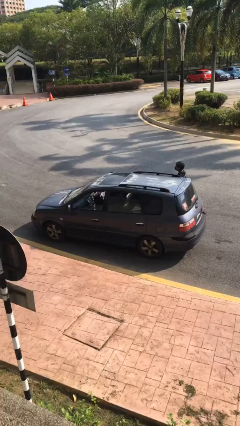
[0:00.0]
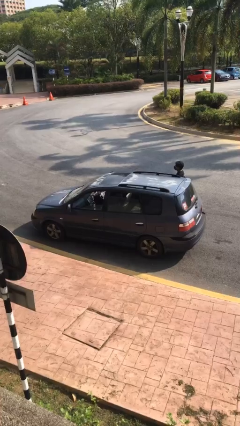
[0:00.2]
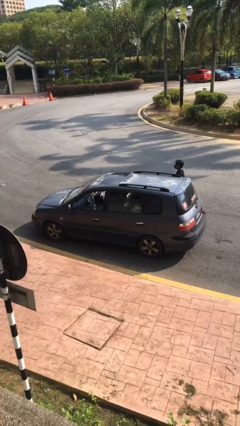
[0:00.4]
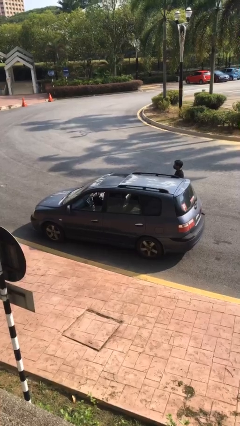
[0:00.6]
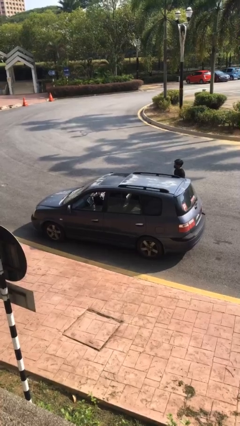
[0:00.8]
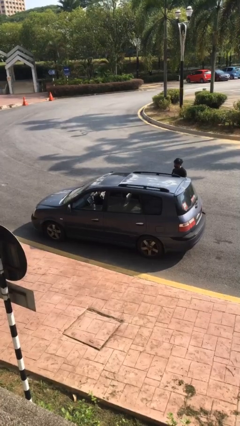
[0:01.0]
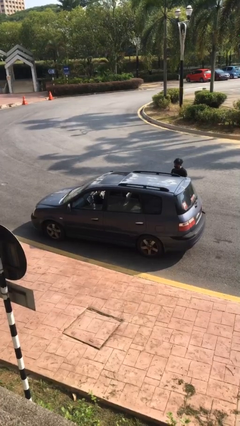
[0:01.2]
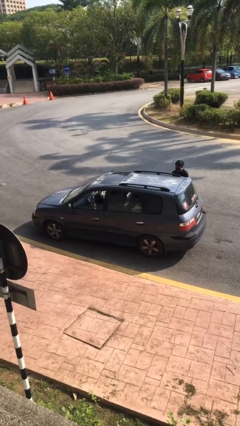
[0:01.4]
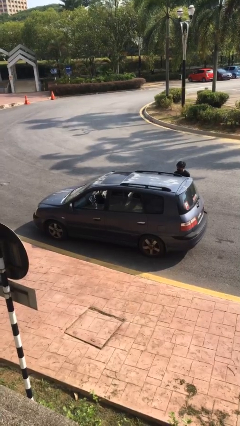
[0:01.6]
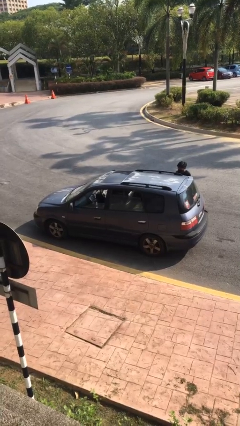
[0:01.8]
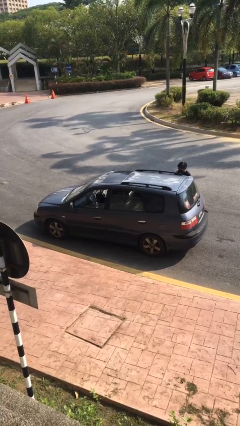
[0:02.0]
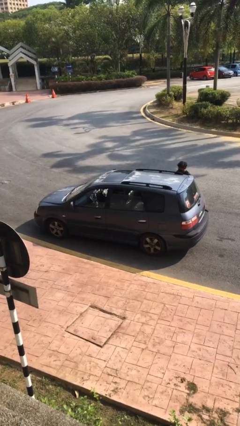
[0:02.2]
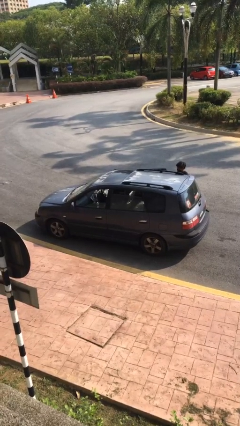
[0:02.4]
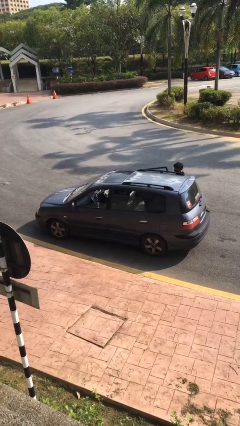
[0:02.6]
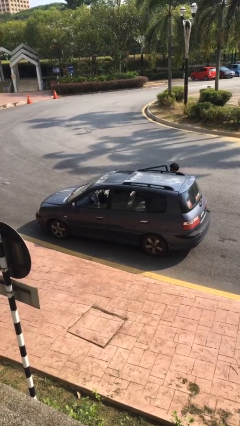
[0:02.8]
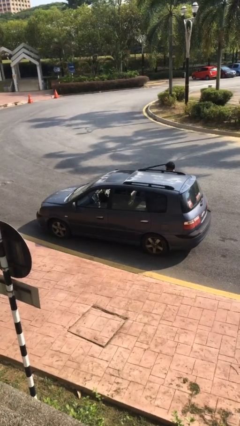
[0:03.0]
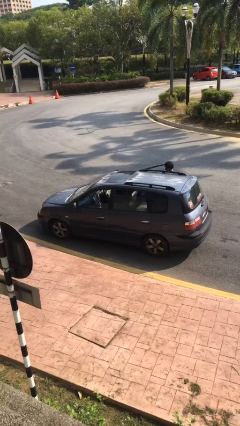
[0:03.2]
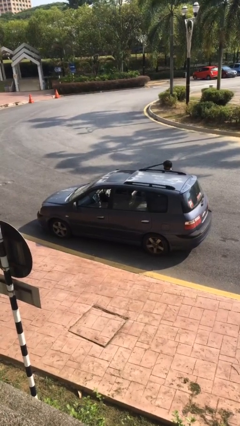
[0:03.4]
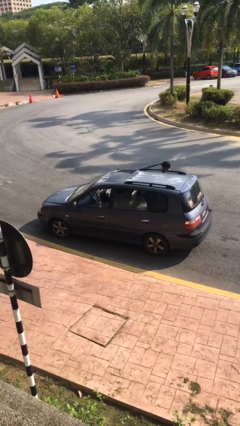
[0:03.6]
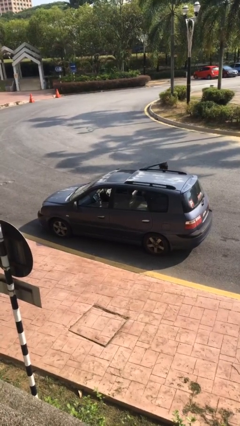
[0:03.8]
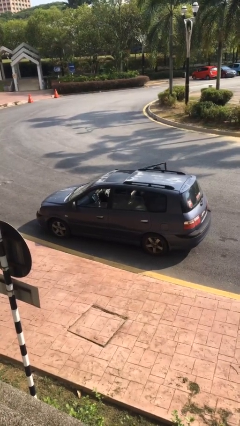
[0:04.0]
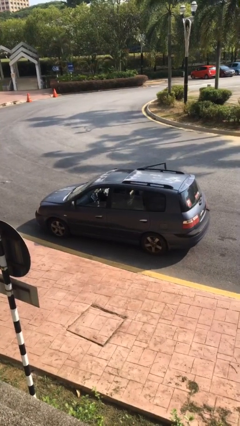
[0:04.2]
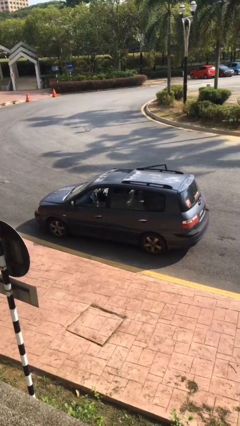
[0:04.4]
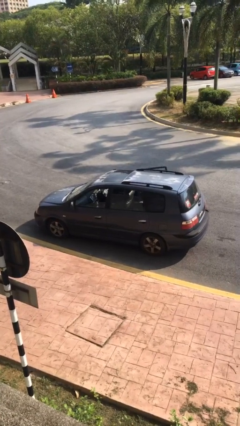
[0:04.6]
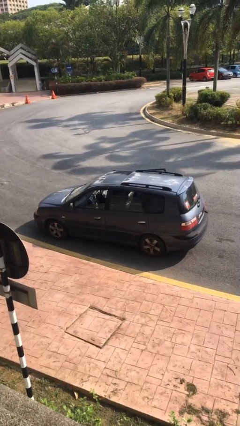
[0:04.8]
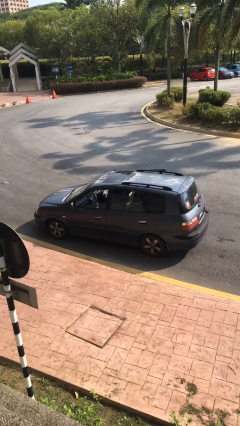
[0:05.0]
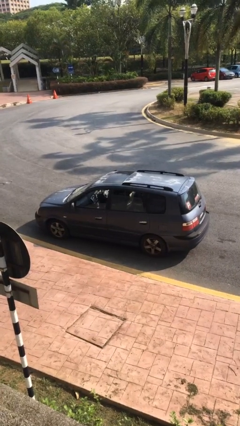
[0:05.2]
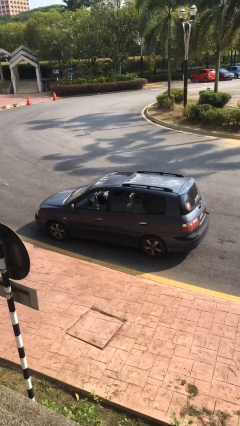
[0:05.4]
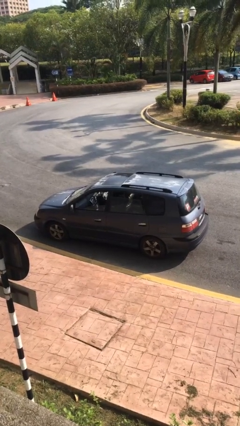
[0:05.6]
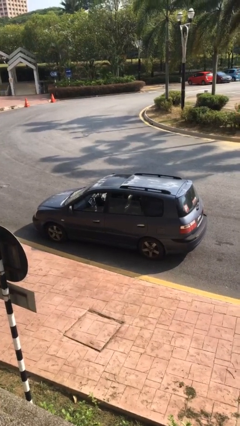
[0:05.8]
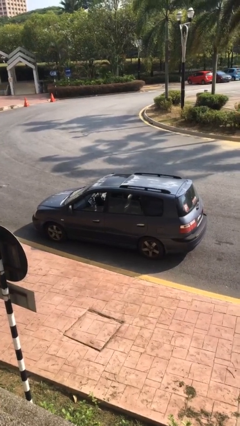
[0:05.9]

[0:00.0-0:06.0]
car picks up person

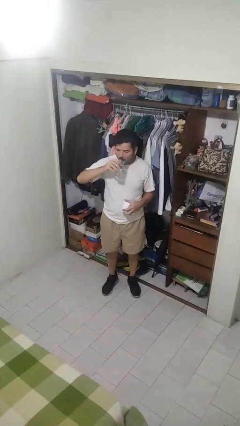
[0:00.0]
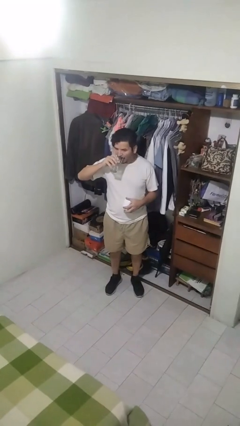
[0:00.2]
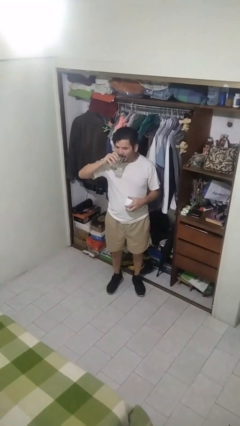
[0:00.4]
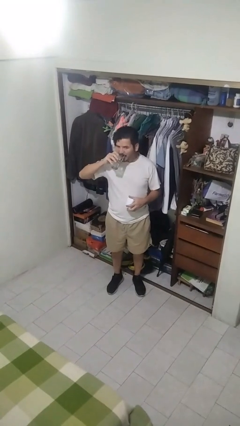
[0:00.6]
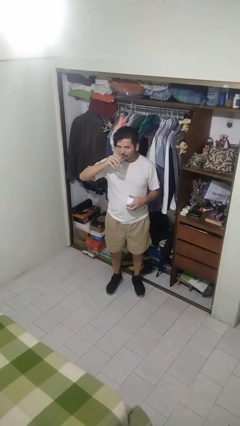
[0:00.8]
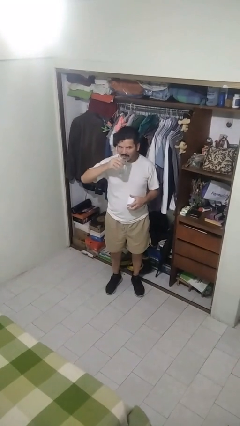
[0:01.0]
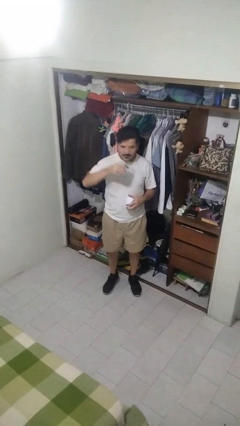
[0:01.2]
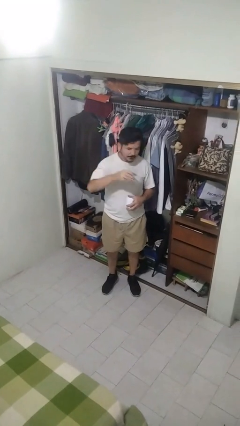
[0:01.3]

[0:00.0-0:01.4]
person drinks from cup

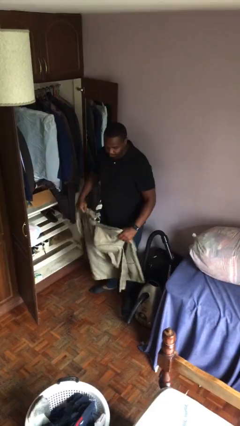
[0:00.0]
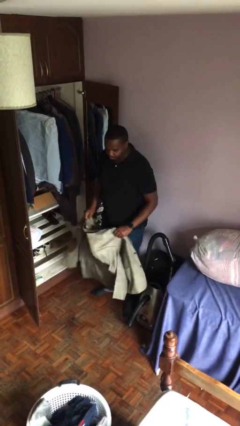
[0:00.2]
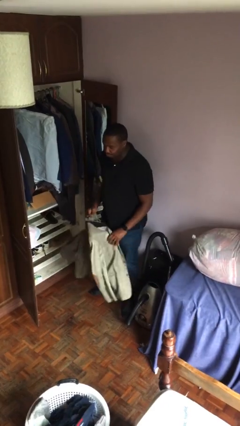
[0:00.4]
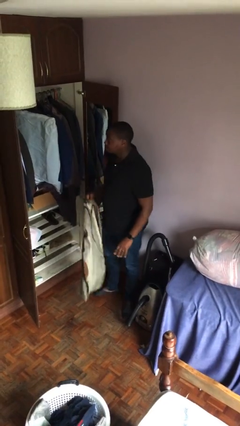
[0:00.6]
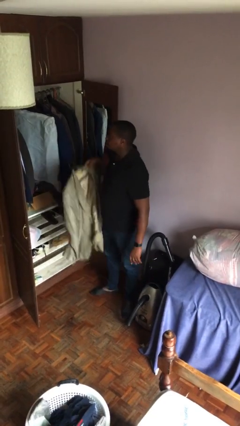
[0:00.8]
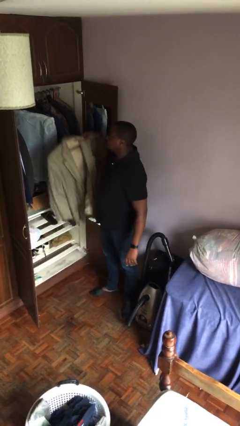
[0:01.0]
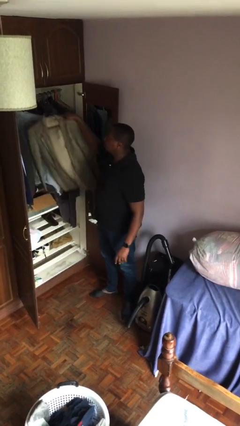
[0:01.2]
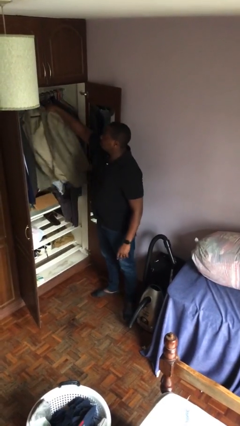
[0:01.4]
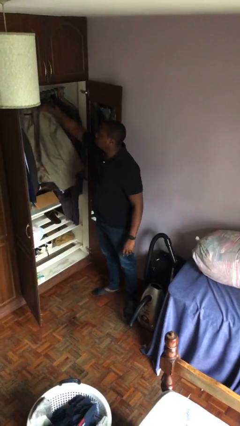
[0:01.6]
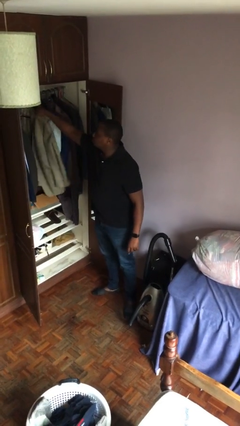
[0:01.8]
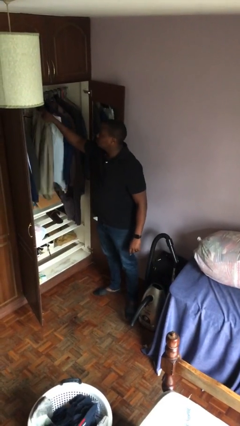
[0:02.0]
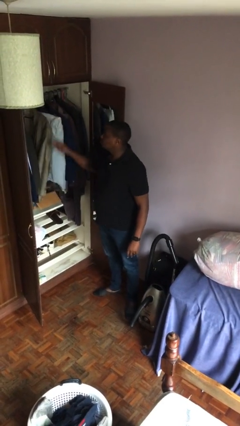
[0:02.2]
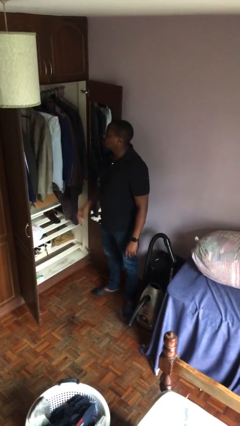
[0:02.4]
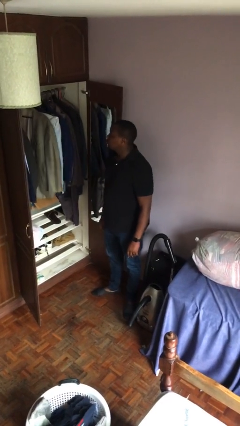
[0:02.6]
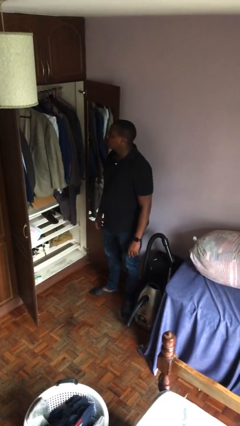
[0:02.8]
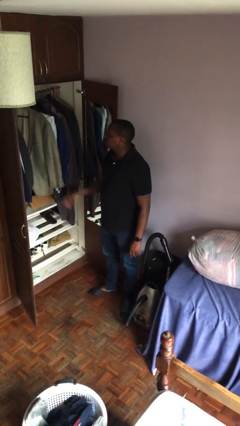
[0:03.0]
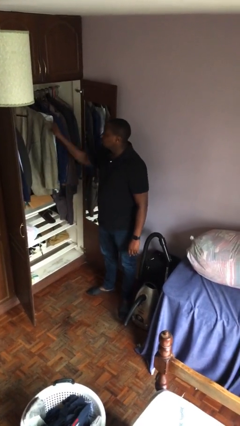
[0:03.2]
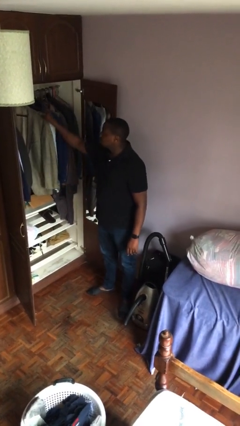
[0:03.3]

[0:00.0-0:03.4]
person puts clothes into closet

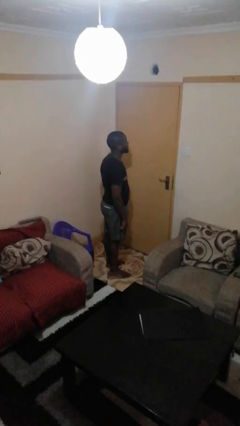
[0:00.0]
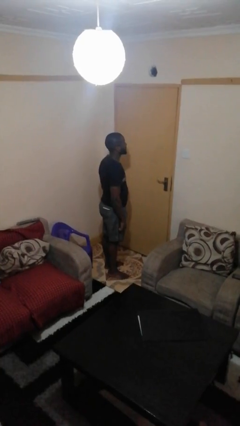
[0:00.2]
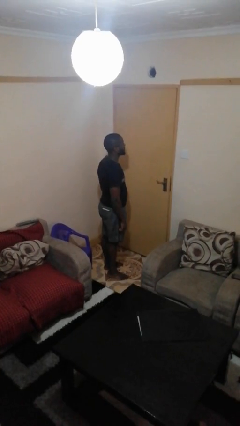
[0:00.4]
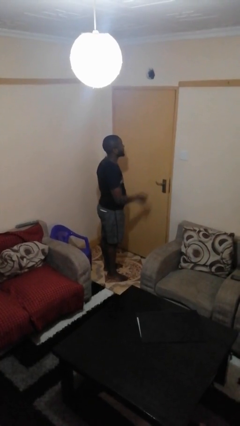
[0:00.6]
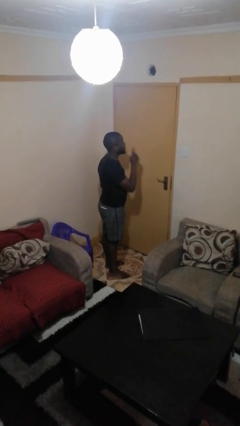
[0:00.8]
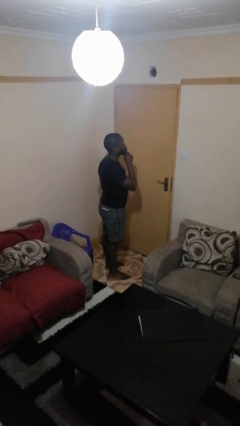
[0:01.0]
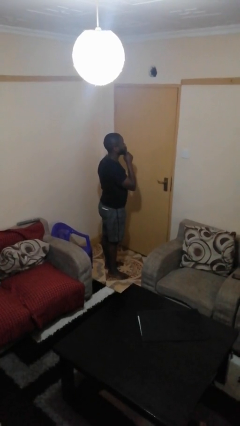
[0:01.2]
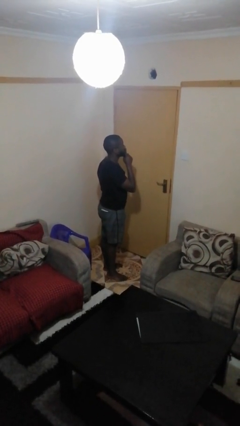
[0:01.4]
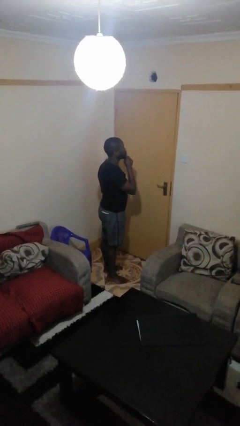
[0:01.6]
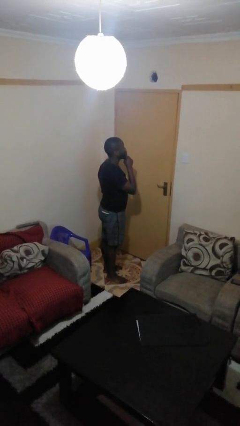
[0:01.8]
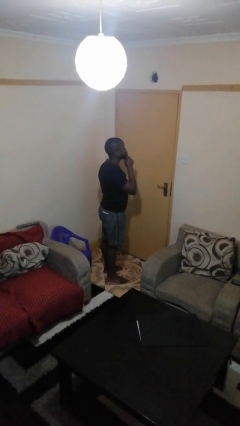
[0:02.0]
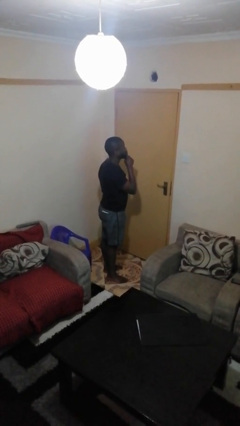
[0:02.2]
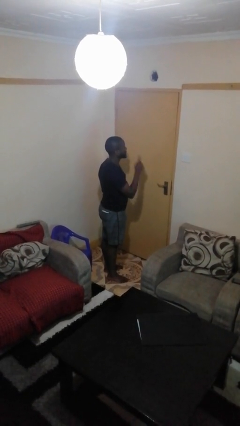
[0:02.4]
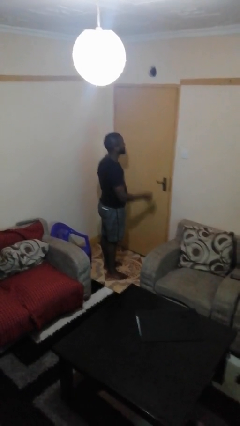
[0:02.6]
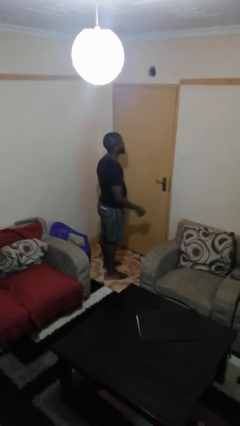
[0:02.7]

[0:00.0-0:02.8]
person gestures be quiet

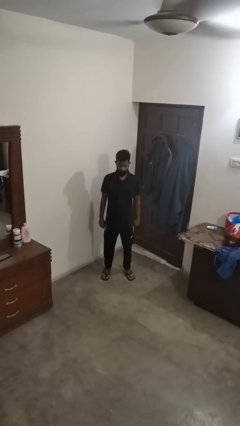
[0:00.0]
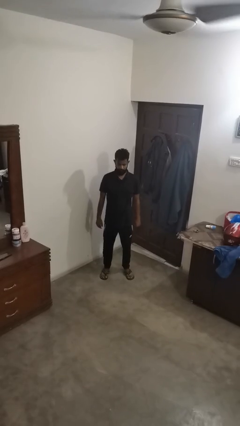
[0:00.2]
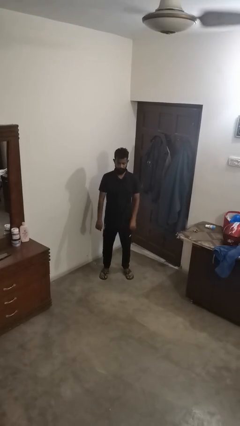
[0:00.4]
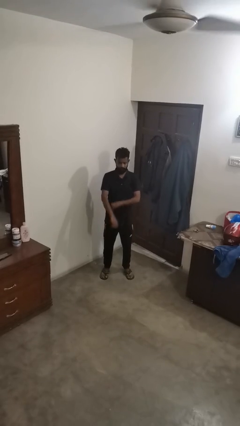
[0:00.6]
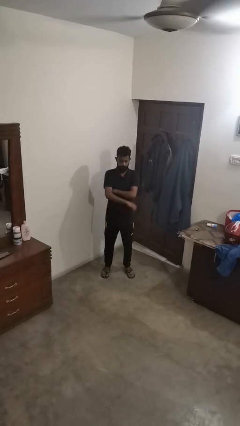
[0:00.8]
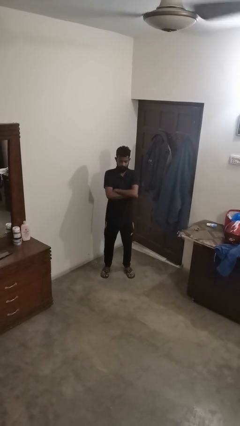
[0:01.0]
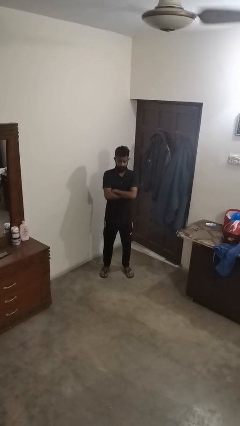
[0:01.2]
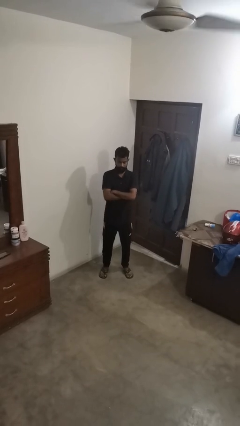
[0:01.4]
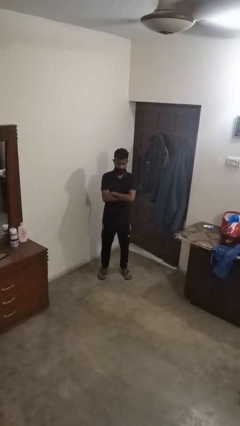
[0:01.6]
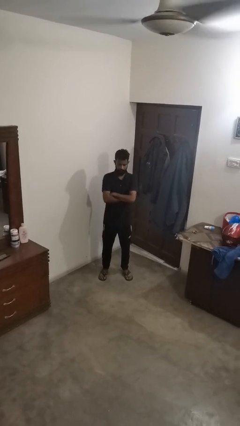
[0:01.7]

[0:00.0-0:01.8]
person crosses arms

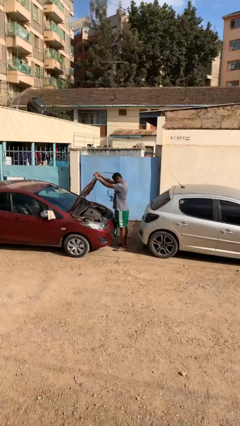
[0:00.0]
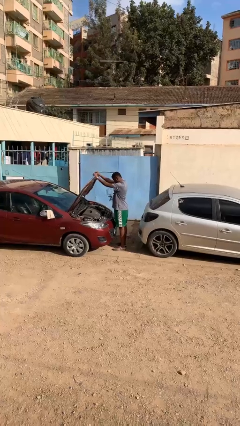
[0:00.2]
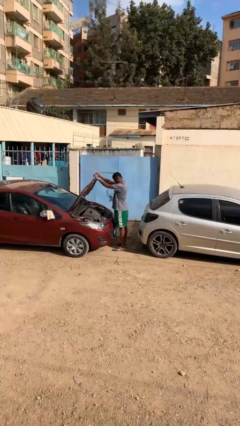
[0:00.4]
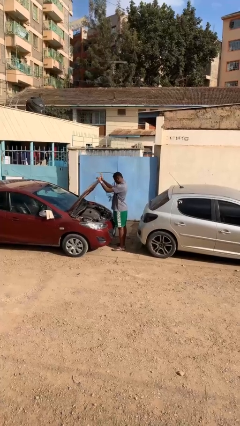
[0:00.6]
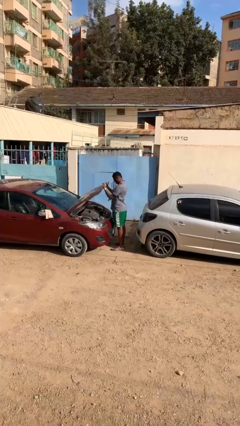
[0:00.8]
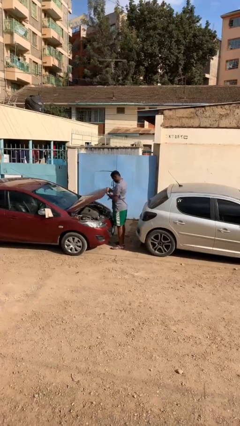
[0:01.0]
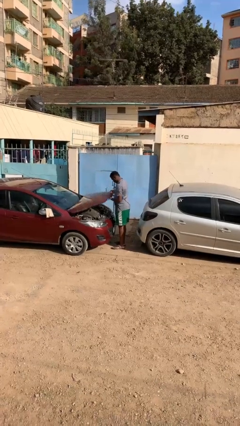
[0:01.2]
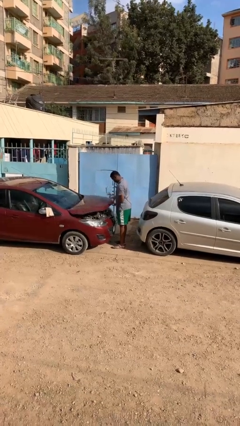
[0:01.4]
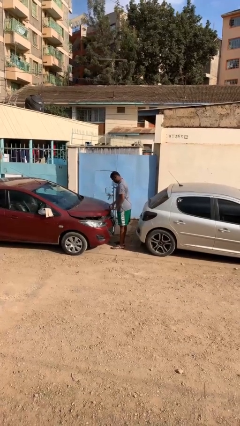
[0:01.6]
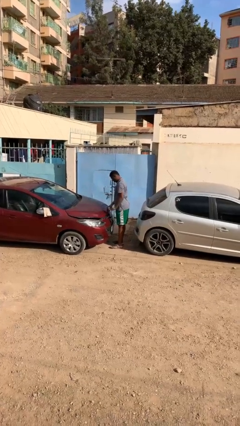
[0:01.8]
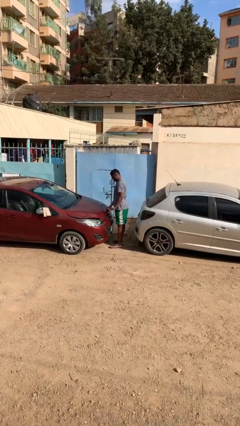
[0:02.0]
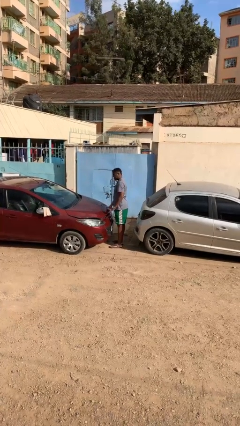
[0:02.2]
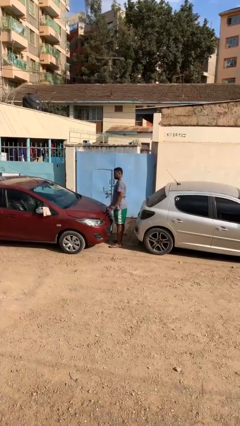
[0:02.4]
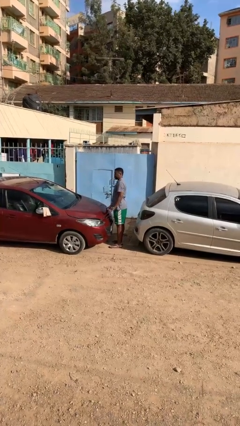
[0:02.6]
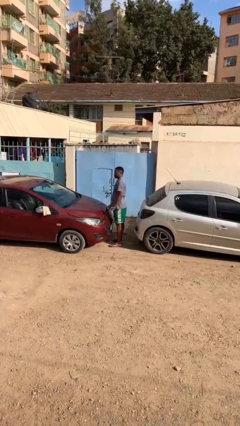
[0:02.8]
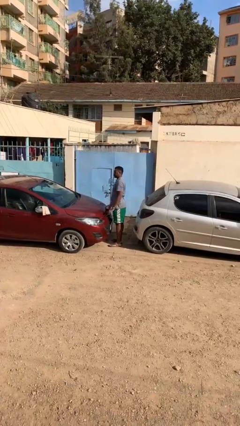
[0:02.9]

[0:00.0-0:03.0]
person closes car hood
